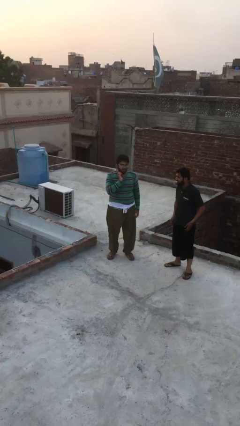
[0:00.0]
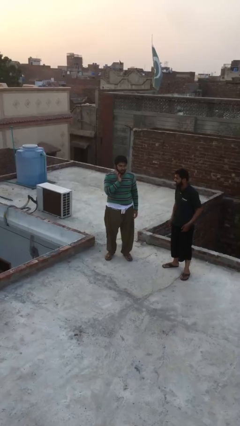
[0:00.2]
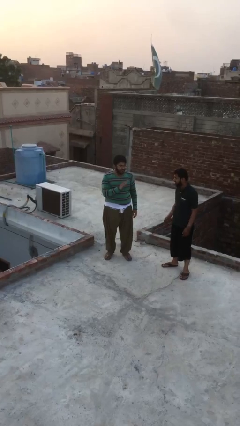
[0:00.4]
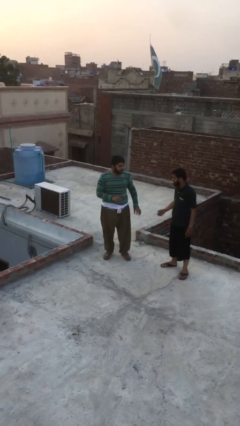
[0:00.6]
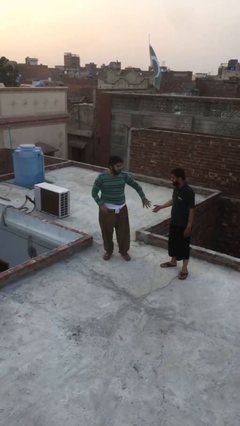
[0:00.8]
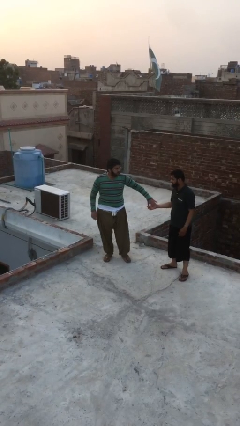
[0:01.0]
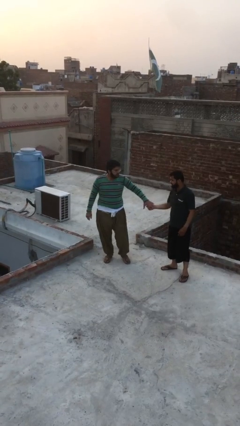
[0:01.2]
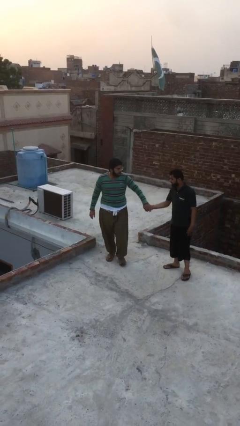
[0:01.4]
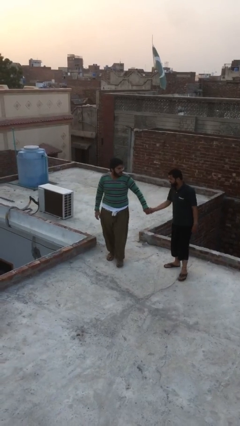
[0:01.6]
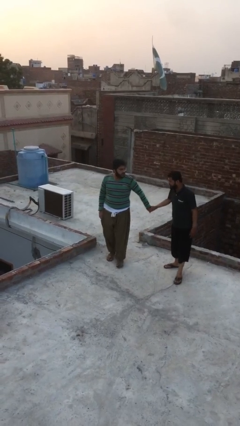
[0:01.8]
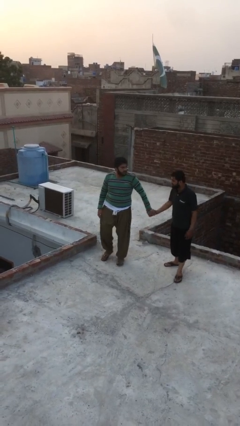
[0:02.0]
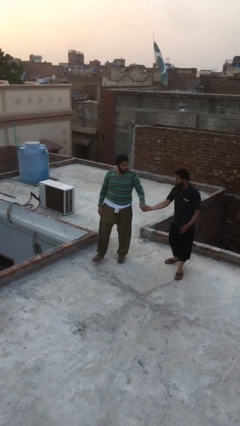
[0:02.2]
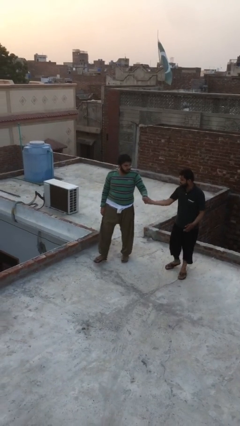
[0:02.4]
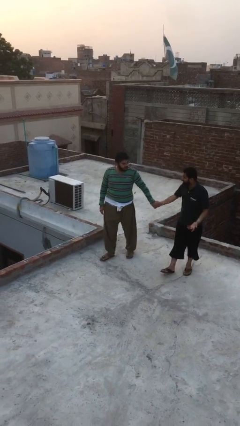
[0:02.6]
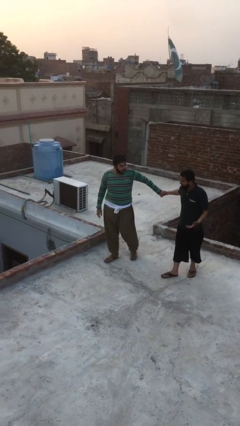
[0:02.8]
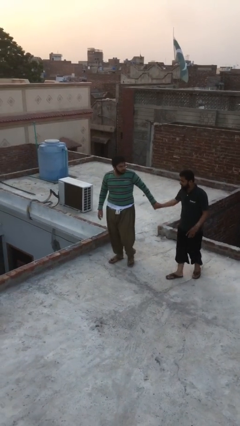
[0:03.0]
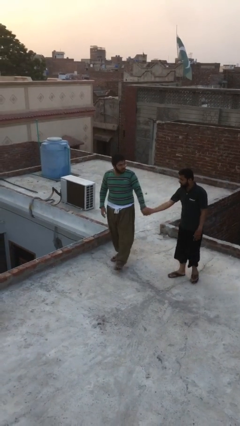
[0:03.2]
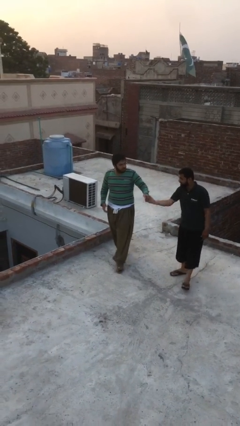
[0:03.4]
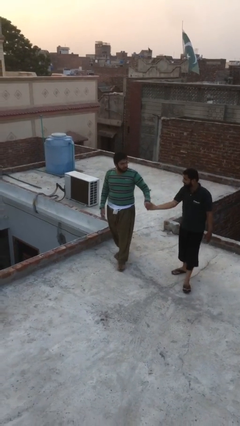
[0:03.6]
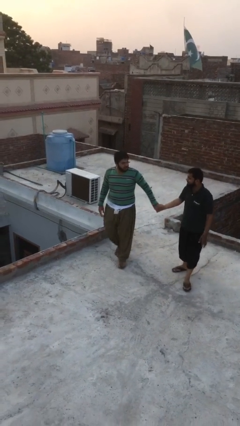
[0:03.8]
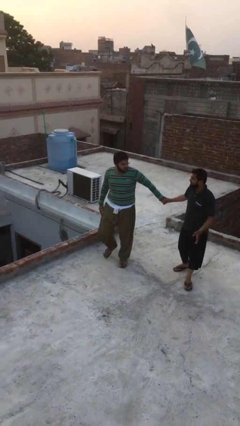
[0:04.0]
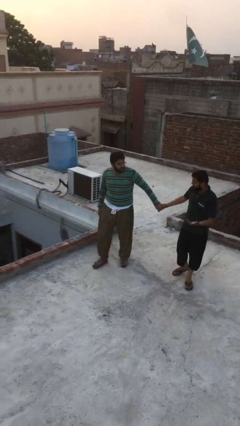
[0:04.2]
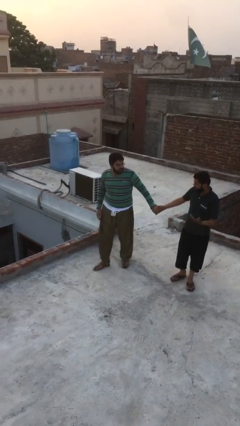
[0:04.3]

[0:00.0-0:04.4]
person holds hand

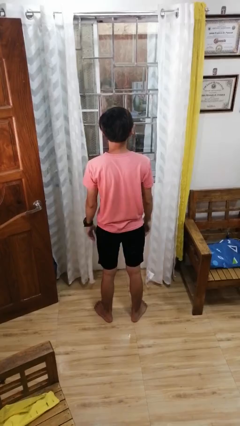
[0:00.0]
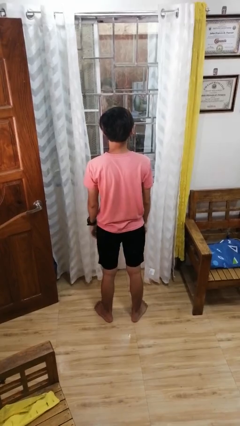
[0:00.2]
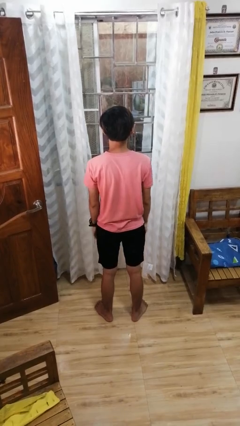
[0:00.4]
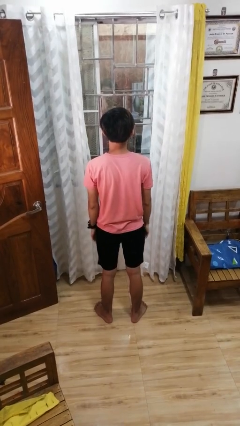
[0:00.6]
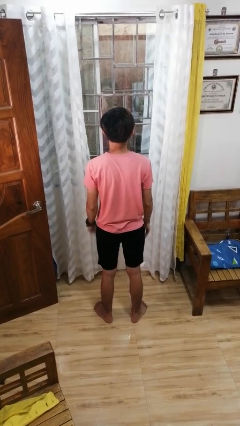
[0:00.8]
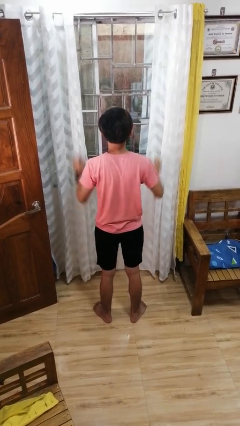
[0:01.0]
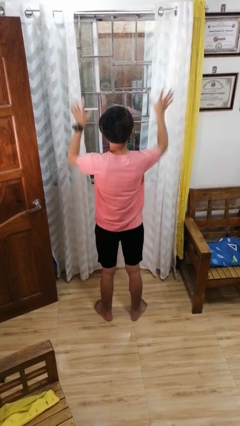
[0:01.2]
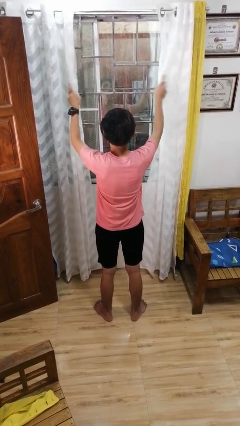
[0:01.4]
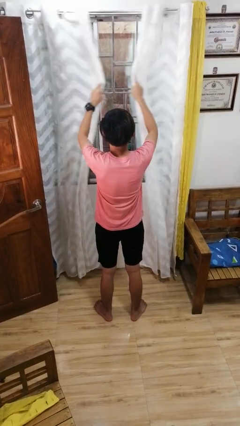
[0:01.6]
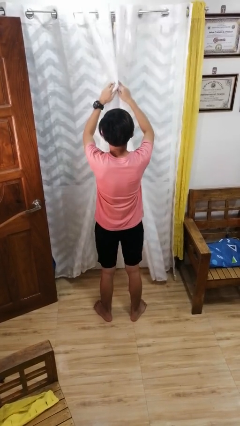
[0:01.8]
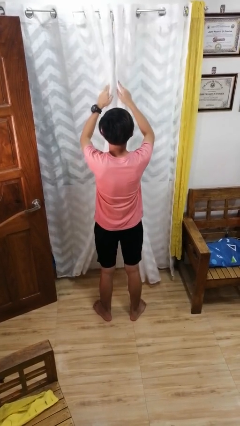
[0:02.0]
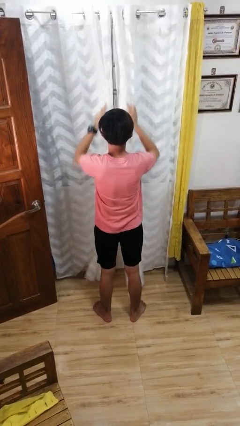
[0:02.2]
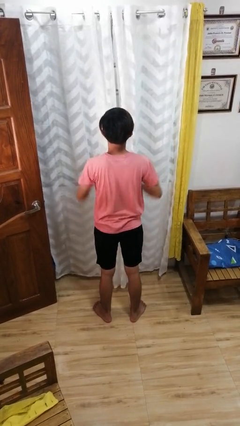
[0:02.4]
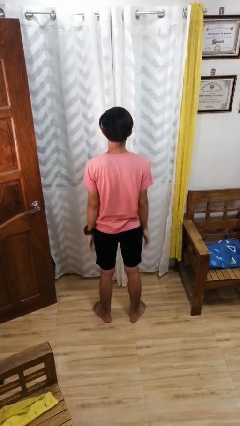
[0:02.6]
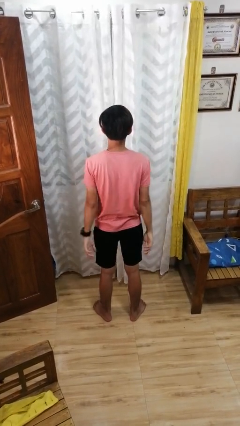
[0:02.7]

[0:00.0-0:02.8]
person closes curtains

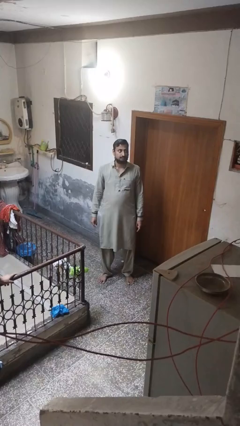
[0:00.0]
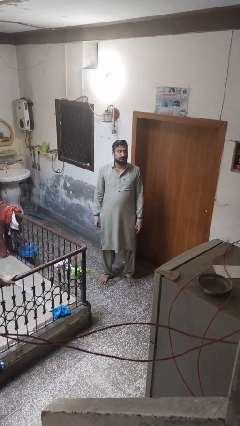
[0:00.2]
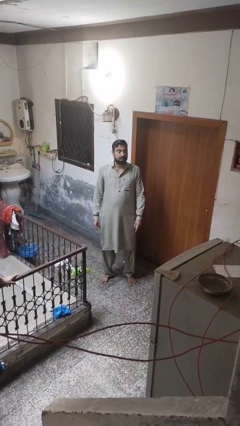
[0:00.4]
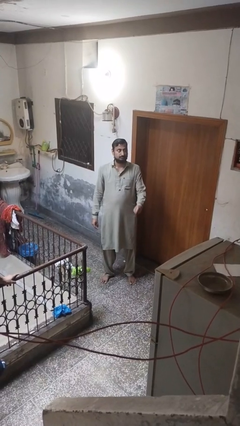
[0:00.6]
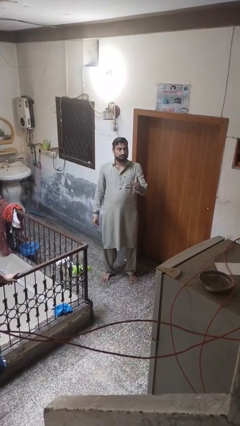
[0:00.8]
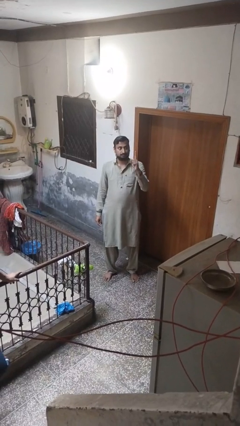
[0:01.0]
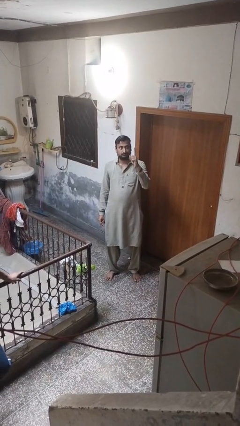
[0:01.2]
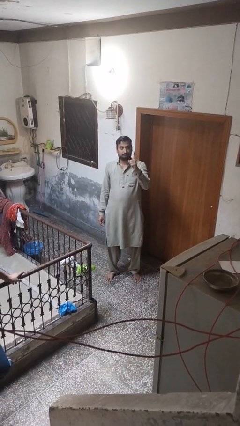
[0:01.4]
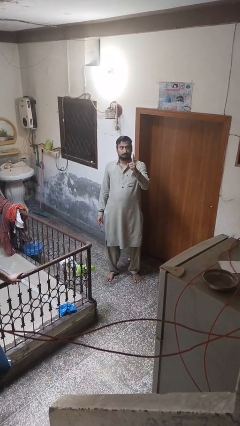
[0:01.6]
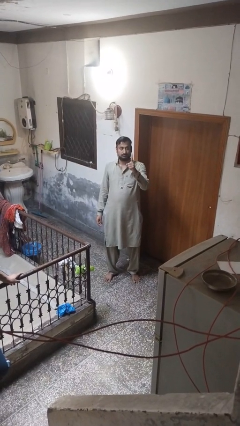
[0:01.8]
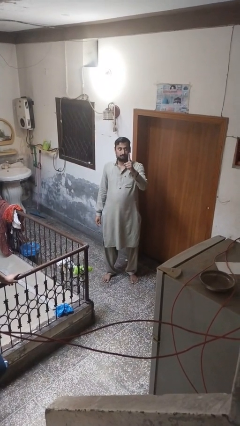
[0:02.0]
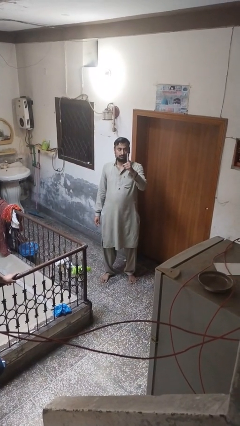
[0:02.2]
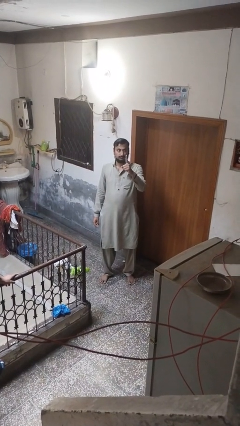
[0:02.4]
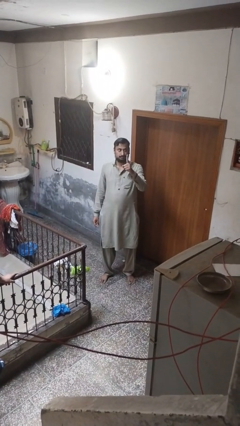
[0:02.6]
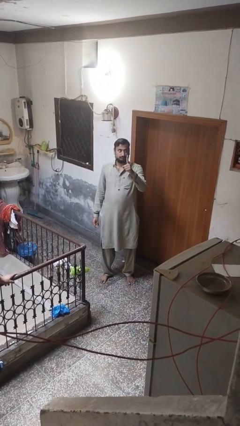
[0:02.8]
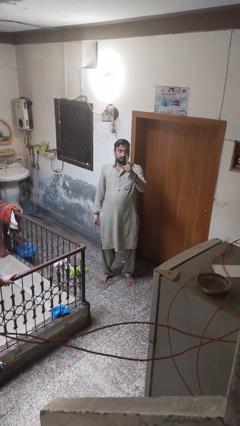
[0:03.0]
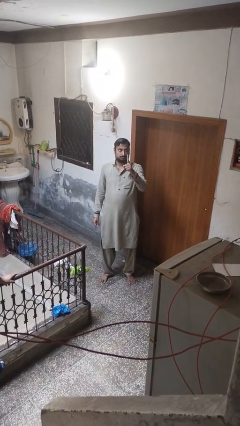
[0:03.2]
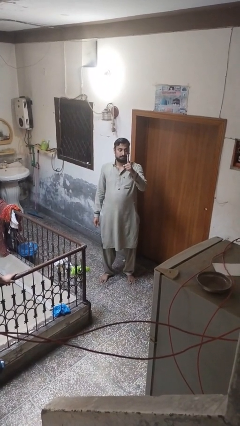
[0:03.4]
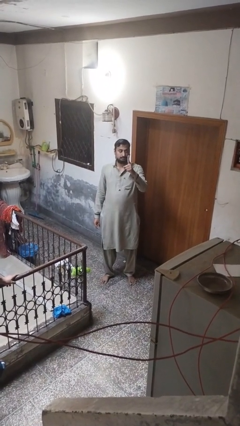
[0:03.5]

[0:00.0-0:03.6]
person gestures number one

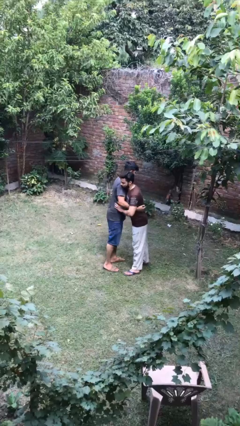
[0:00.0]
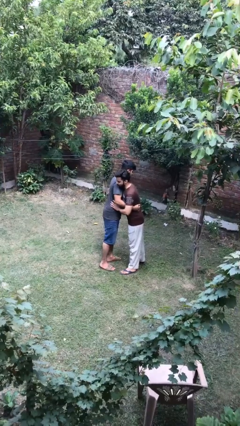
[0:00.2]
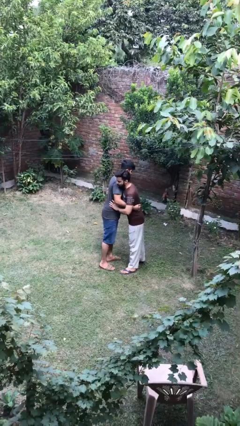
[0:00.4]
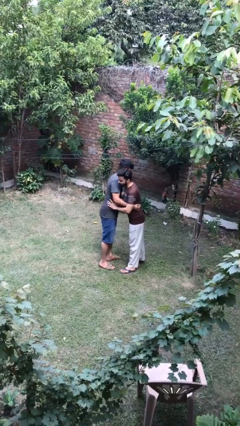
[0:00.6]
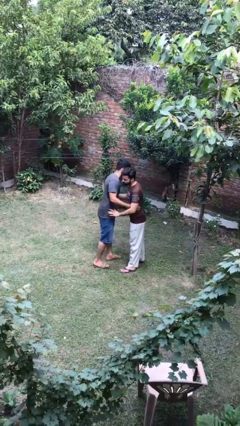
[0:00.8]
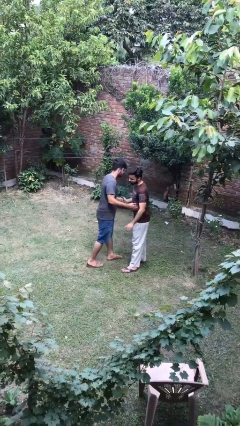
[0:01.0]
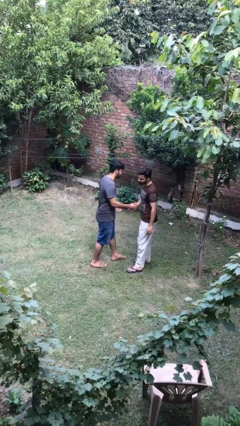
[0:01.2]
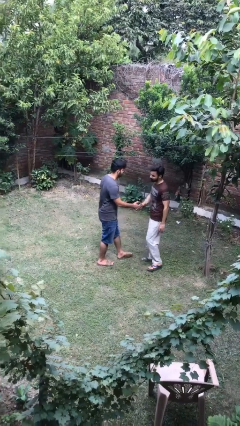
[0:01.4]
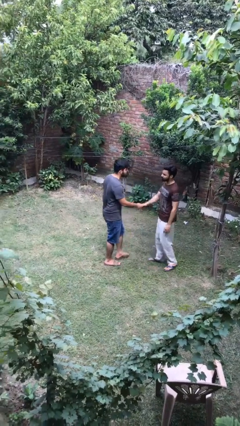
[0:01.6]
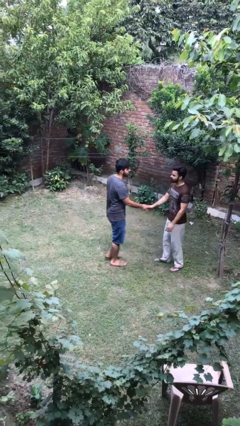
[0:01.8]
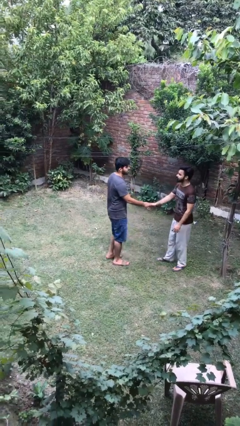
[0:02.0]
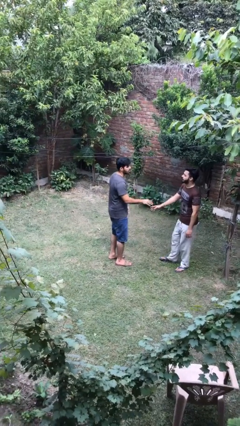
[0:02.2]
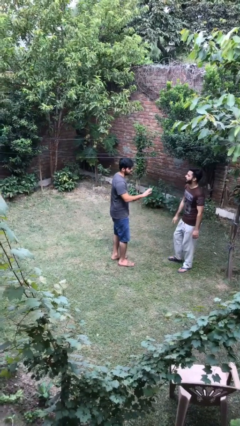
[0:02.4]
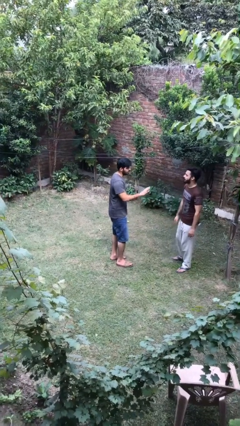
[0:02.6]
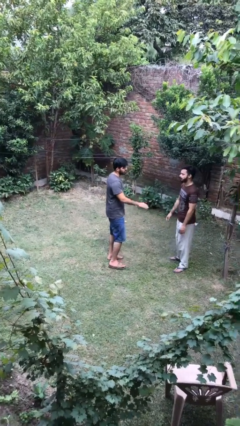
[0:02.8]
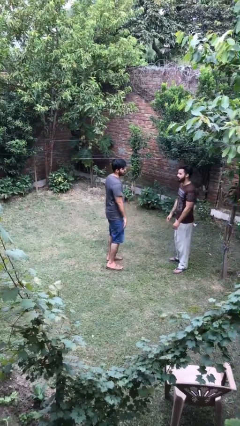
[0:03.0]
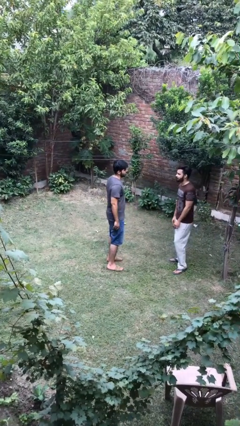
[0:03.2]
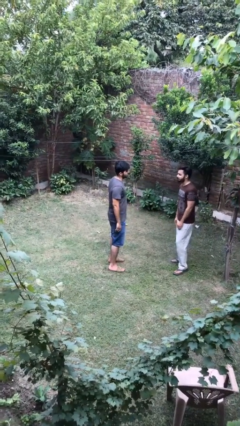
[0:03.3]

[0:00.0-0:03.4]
person embraces person

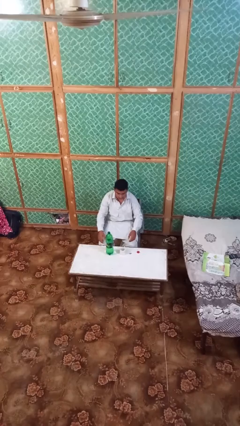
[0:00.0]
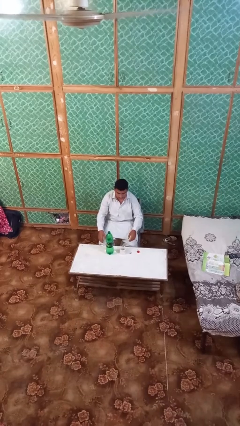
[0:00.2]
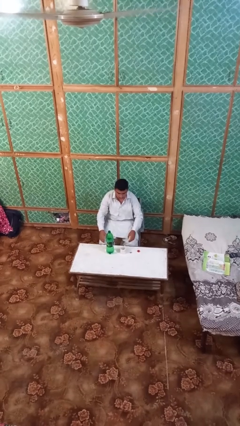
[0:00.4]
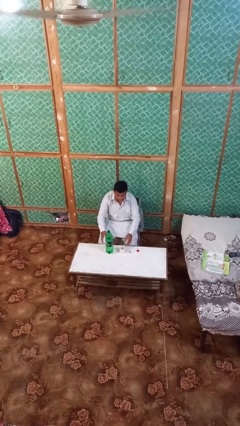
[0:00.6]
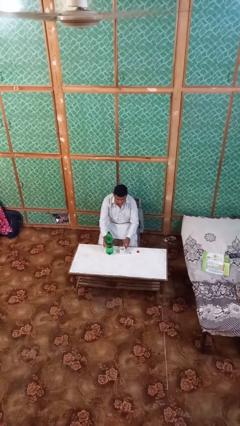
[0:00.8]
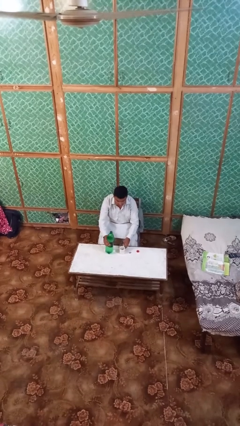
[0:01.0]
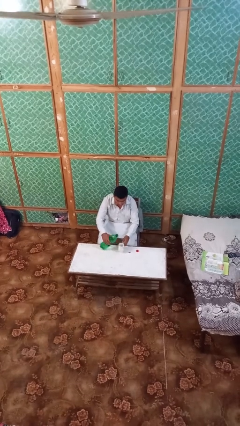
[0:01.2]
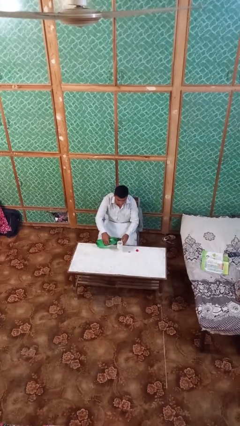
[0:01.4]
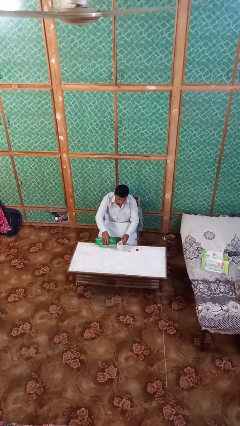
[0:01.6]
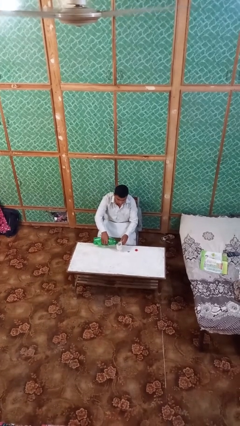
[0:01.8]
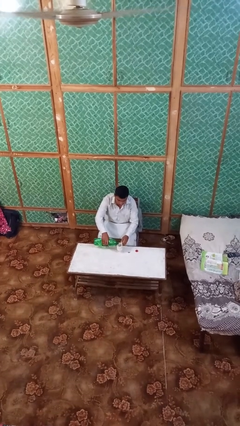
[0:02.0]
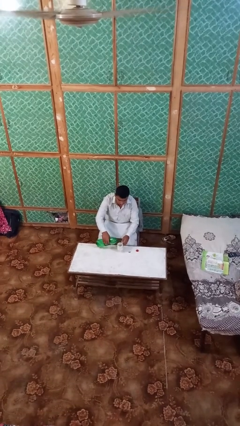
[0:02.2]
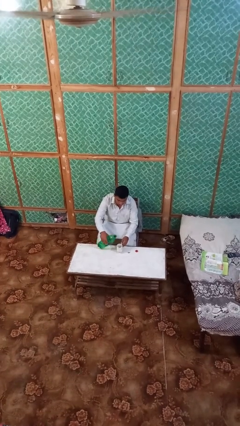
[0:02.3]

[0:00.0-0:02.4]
person pours liquid into cup

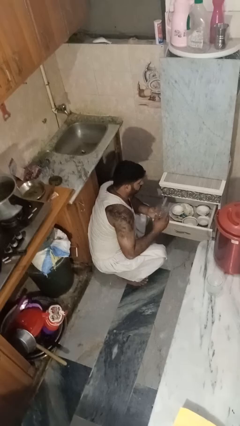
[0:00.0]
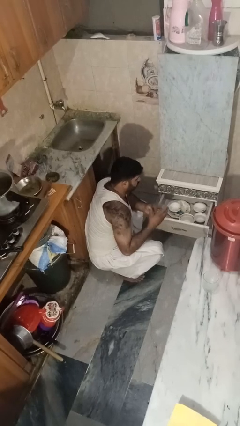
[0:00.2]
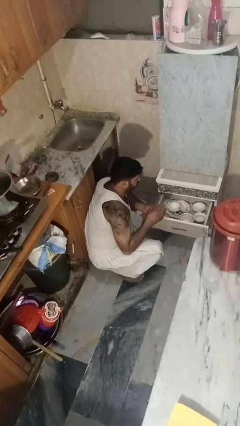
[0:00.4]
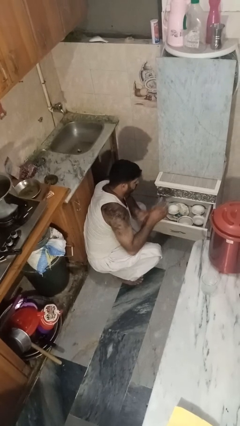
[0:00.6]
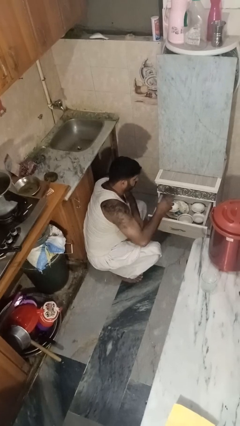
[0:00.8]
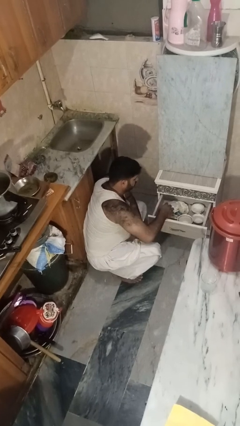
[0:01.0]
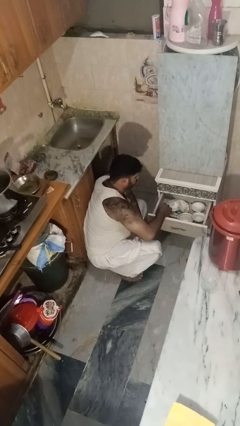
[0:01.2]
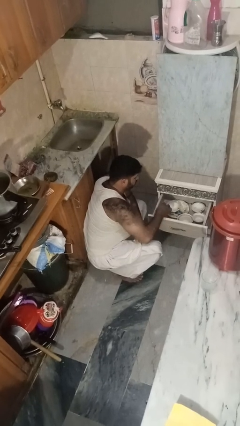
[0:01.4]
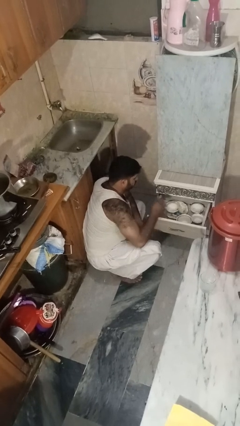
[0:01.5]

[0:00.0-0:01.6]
person puts object into kitchen drawer
